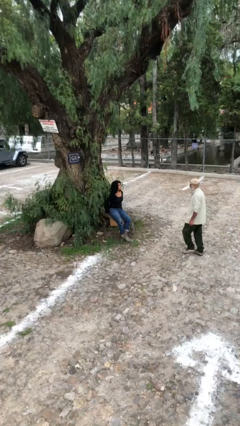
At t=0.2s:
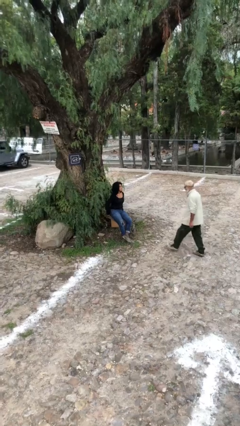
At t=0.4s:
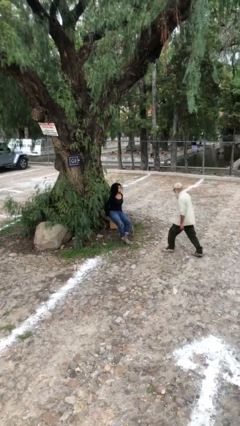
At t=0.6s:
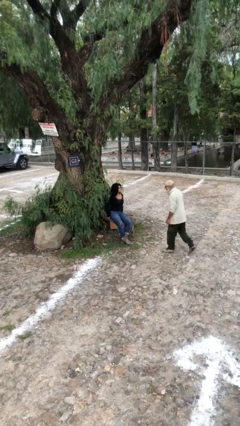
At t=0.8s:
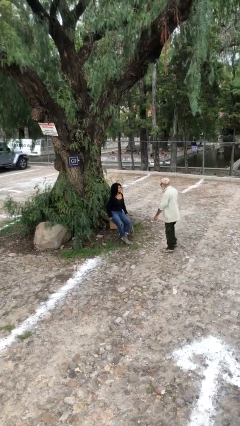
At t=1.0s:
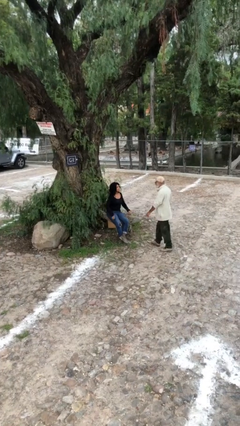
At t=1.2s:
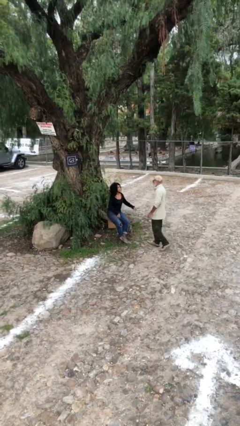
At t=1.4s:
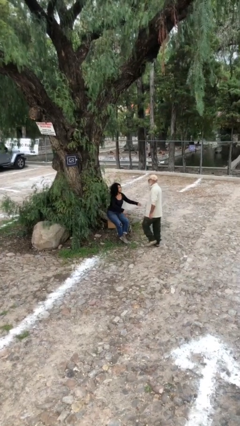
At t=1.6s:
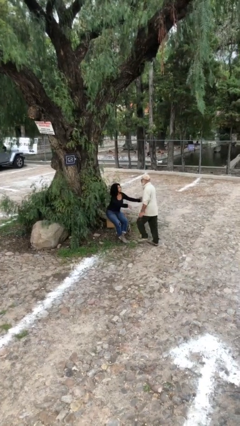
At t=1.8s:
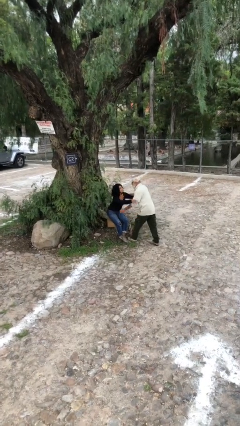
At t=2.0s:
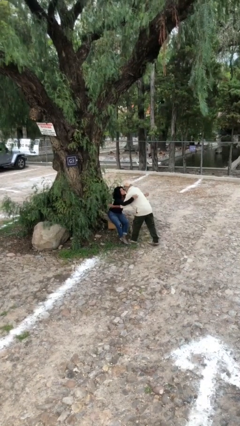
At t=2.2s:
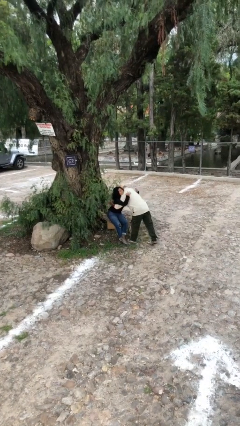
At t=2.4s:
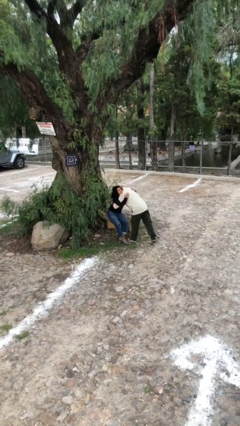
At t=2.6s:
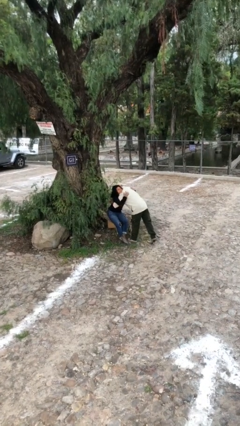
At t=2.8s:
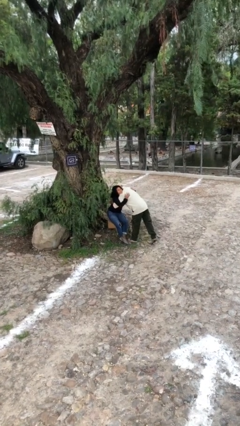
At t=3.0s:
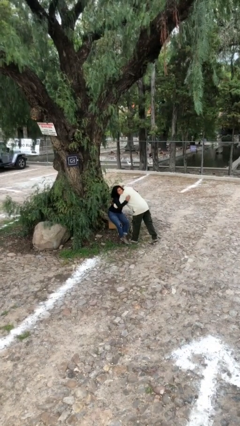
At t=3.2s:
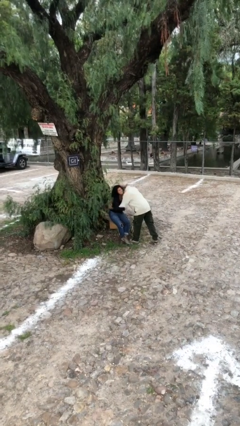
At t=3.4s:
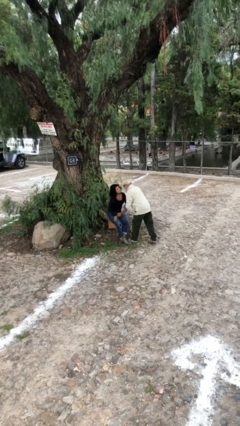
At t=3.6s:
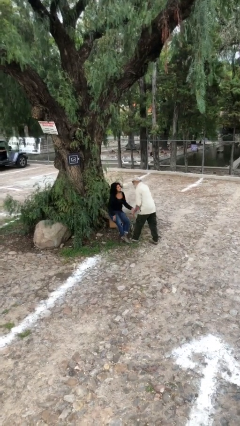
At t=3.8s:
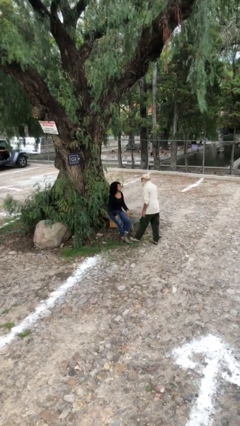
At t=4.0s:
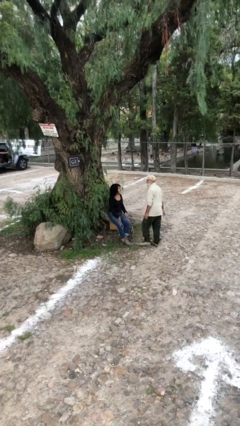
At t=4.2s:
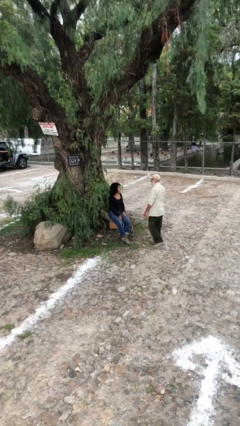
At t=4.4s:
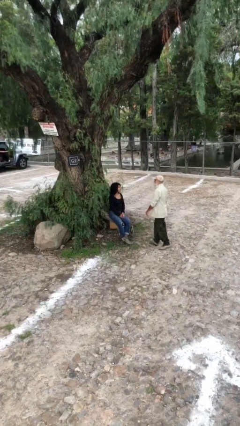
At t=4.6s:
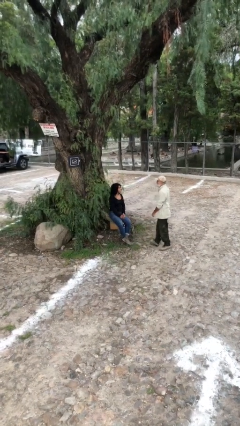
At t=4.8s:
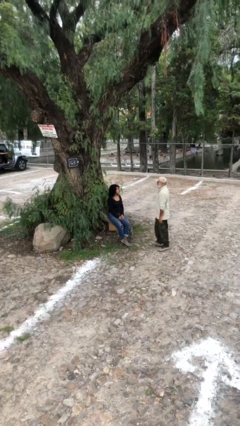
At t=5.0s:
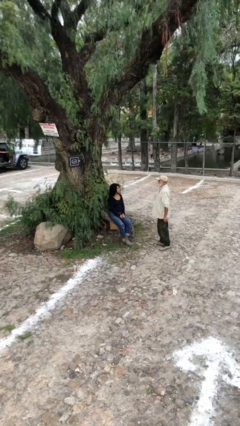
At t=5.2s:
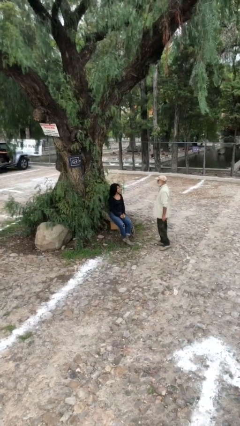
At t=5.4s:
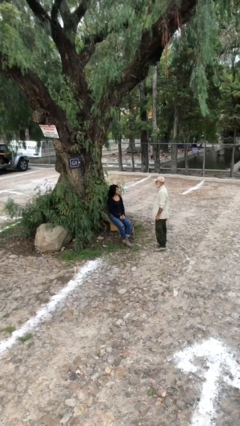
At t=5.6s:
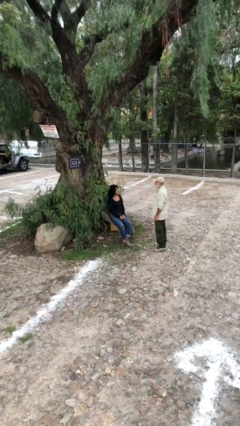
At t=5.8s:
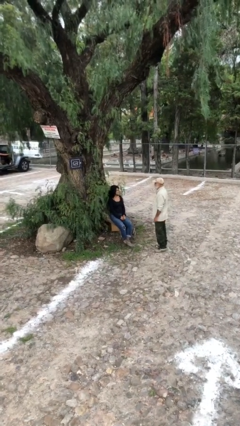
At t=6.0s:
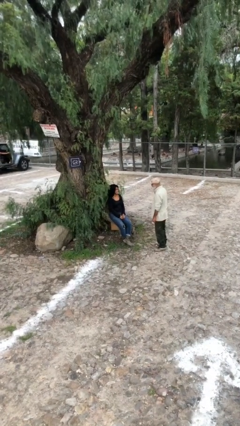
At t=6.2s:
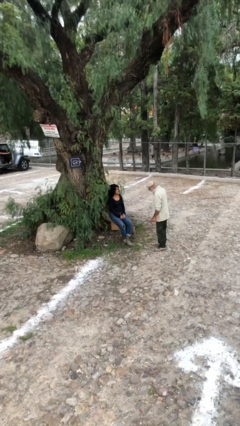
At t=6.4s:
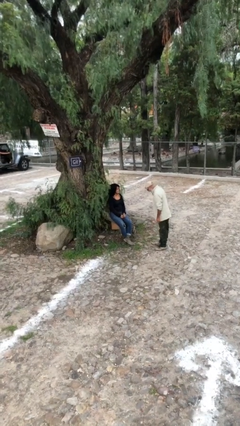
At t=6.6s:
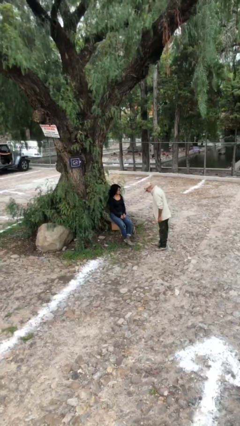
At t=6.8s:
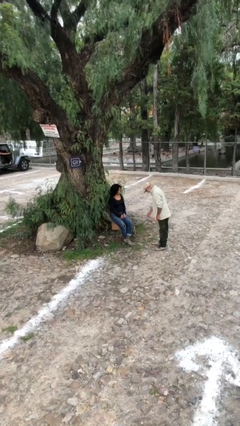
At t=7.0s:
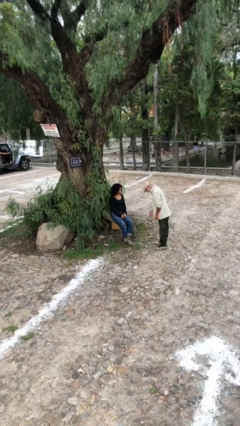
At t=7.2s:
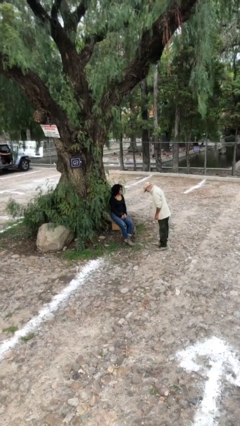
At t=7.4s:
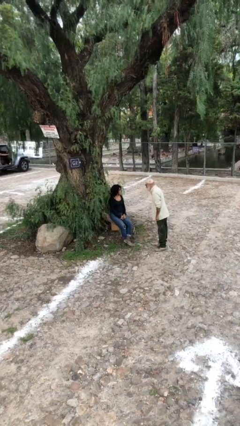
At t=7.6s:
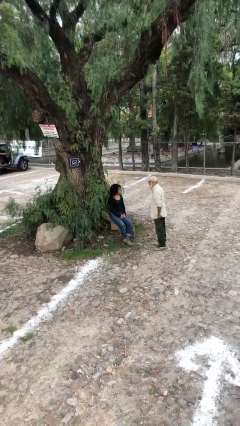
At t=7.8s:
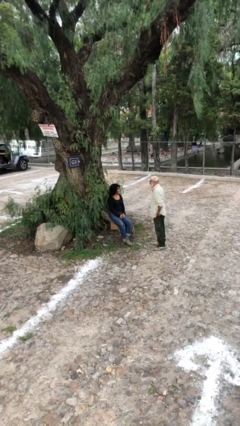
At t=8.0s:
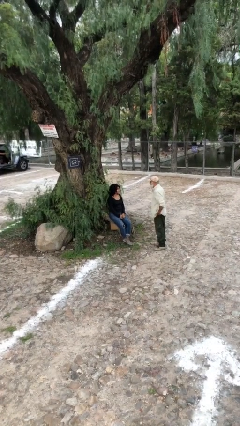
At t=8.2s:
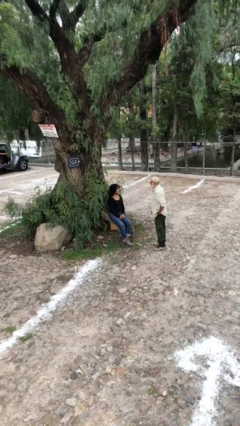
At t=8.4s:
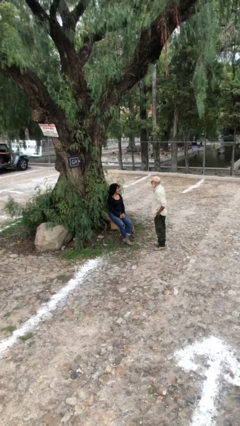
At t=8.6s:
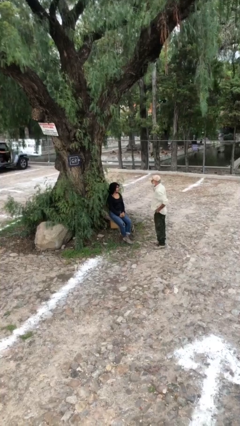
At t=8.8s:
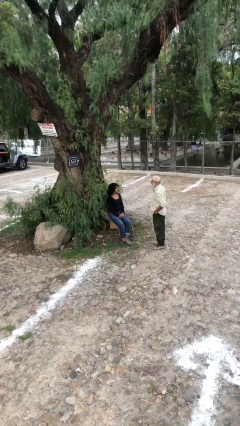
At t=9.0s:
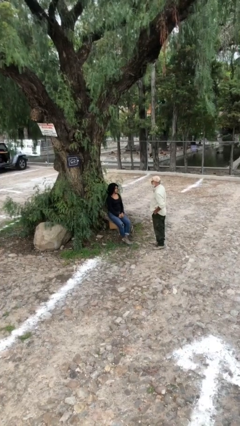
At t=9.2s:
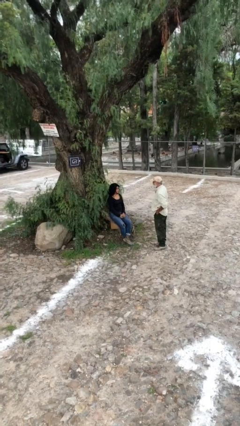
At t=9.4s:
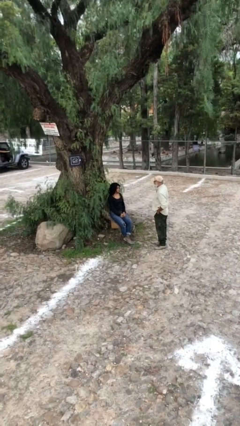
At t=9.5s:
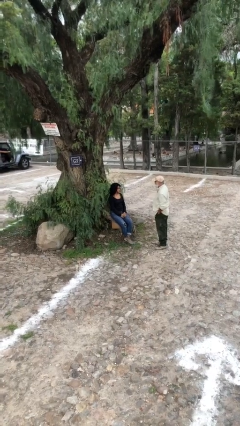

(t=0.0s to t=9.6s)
person embraces person

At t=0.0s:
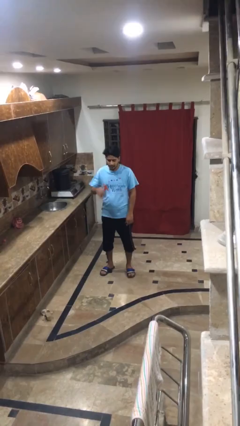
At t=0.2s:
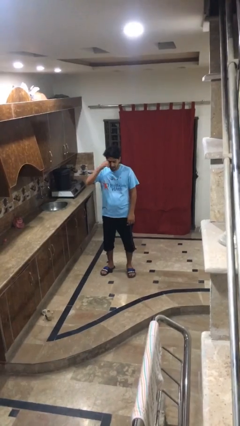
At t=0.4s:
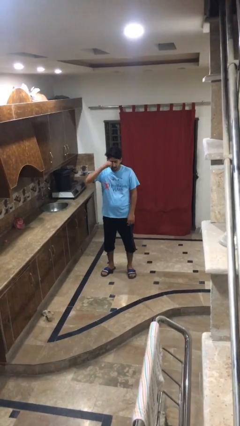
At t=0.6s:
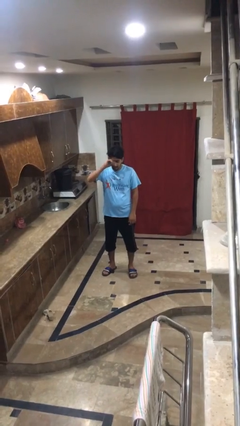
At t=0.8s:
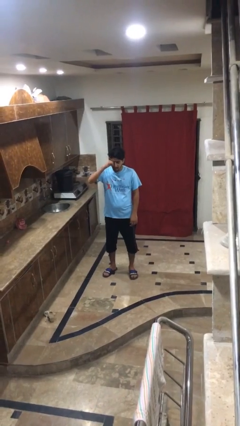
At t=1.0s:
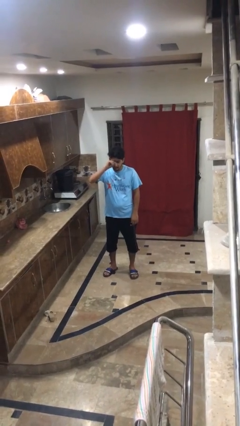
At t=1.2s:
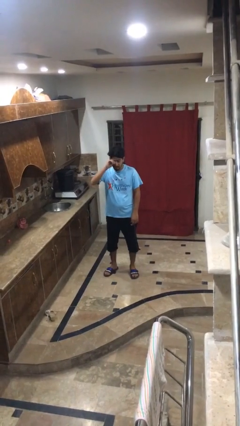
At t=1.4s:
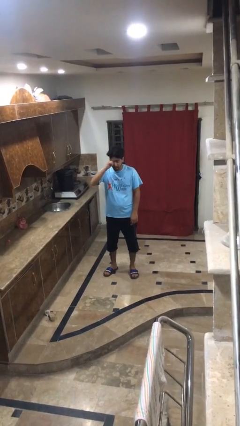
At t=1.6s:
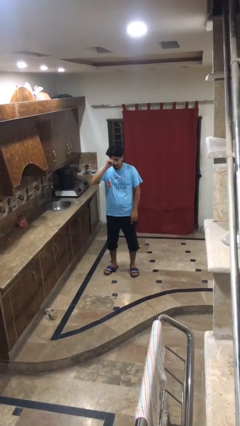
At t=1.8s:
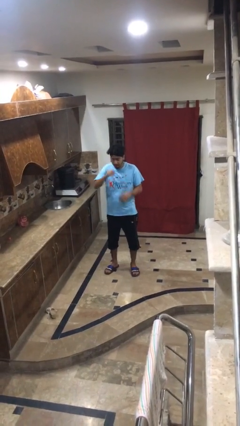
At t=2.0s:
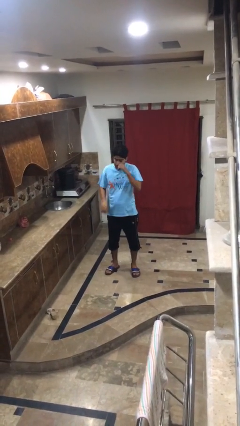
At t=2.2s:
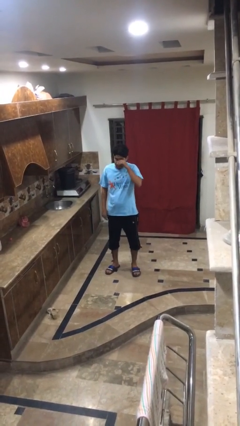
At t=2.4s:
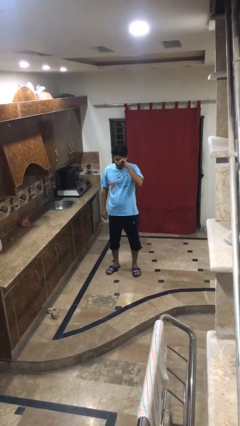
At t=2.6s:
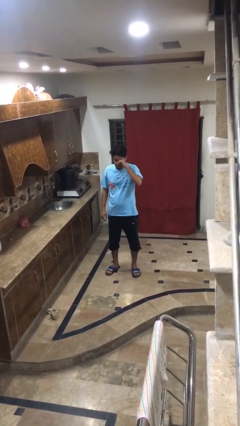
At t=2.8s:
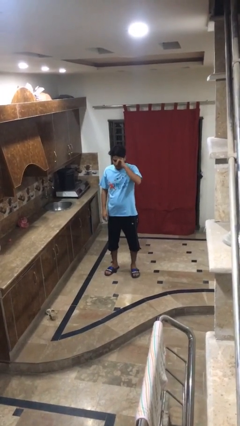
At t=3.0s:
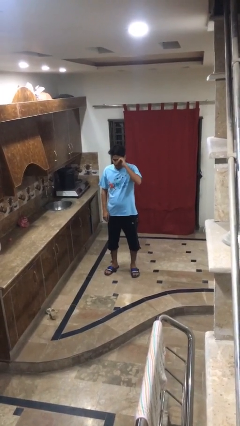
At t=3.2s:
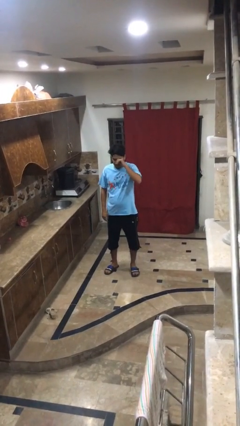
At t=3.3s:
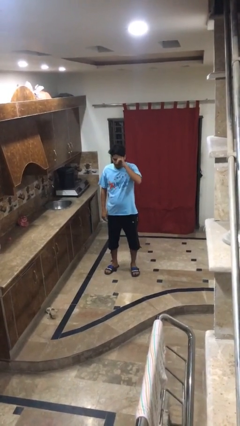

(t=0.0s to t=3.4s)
person rubs eyes

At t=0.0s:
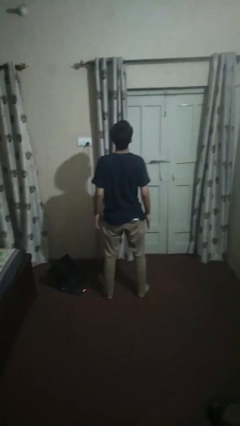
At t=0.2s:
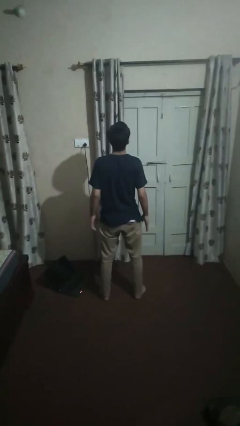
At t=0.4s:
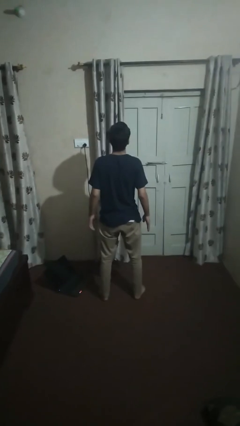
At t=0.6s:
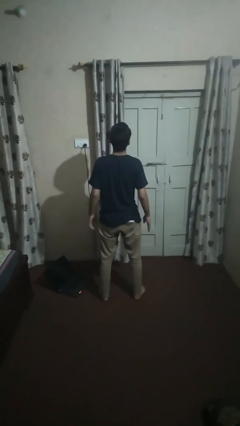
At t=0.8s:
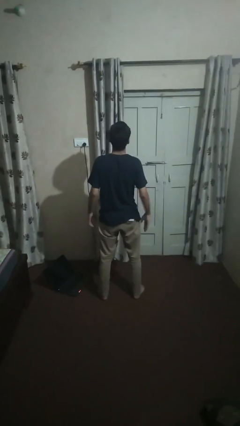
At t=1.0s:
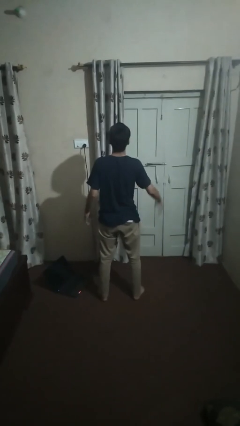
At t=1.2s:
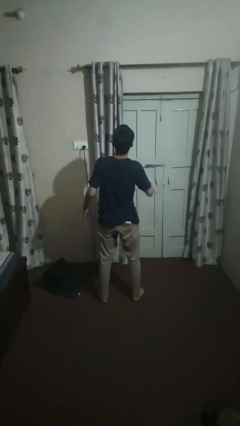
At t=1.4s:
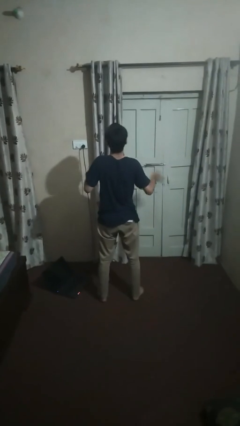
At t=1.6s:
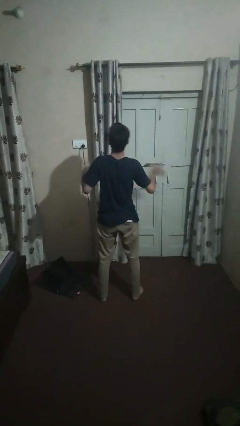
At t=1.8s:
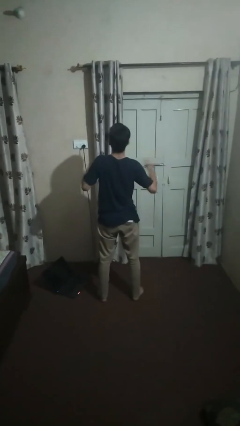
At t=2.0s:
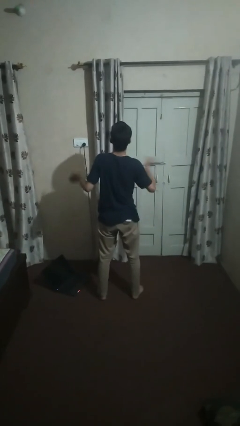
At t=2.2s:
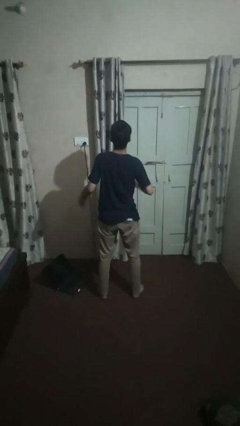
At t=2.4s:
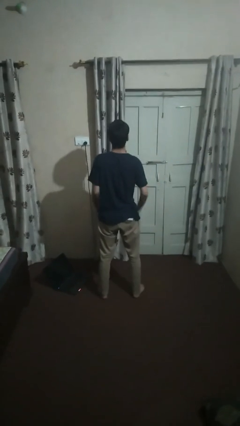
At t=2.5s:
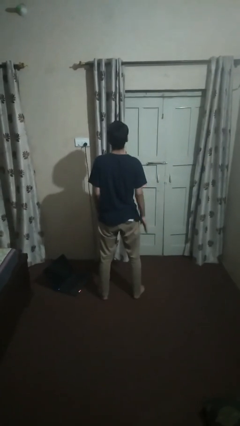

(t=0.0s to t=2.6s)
person drums on chest

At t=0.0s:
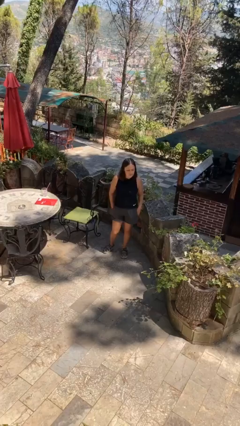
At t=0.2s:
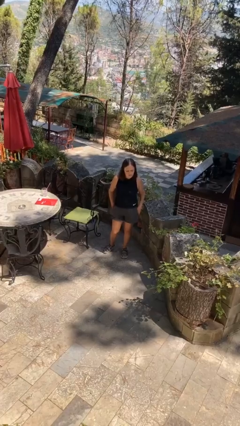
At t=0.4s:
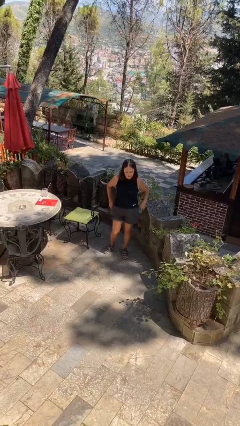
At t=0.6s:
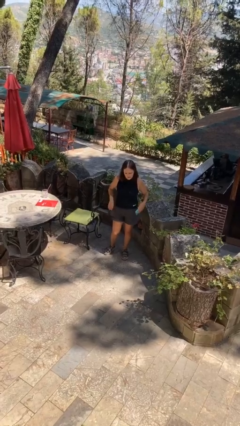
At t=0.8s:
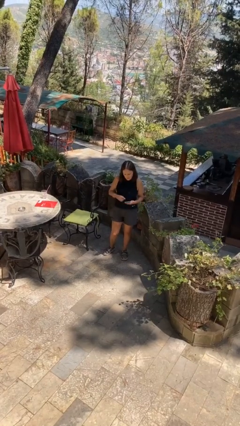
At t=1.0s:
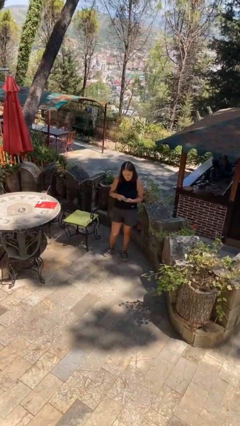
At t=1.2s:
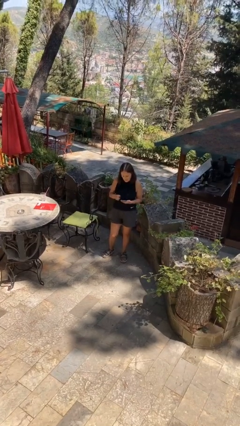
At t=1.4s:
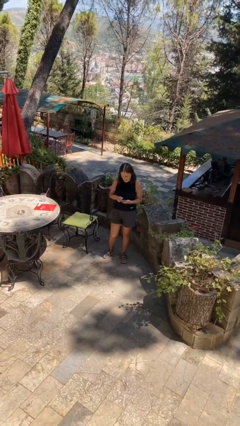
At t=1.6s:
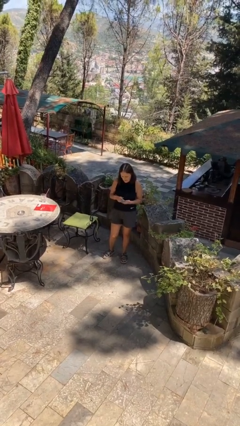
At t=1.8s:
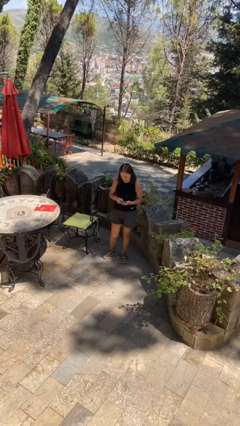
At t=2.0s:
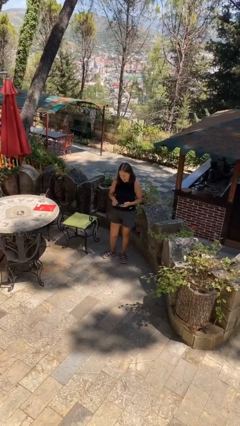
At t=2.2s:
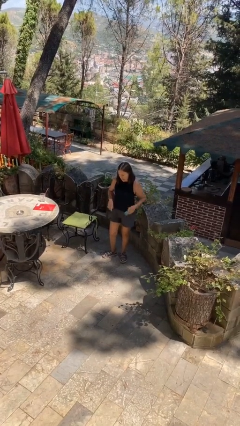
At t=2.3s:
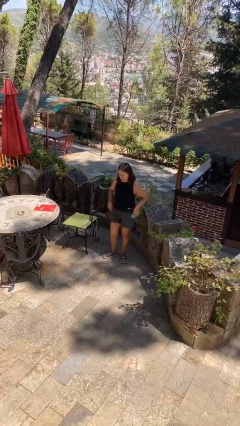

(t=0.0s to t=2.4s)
person takes phone from pocket
